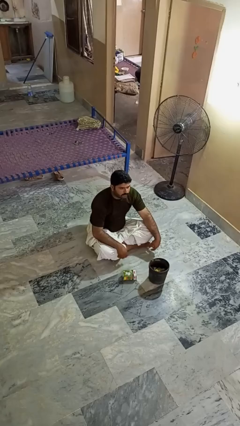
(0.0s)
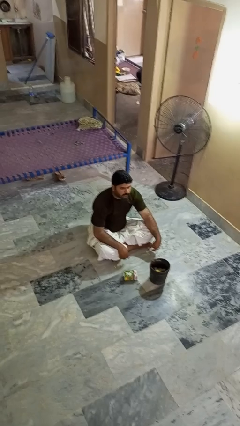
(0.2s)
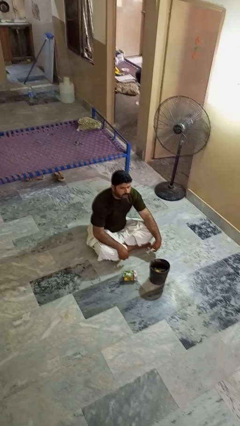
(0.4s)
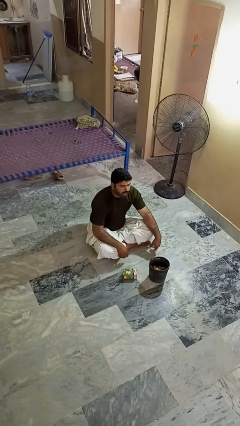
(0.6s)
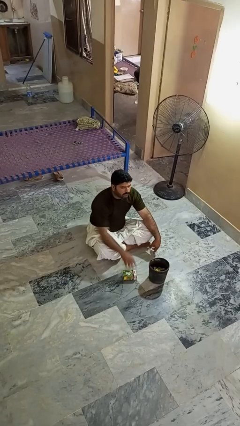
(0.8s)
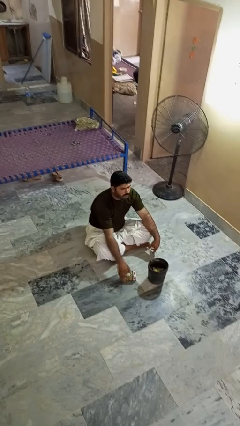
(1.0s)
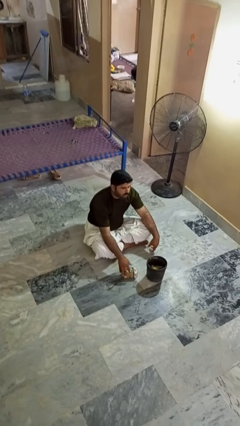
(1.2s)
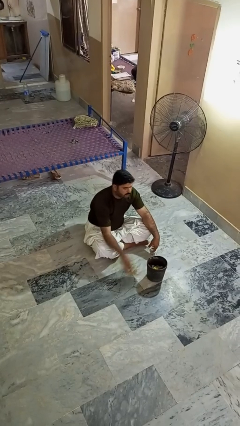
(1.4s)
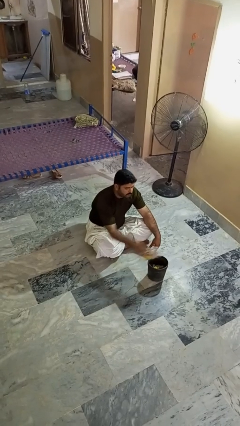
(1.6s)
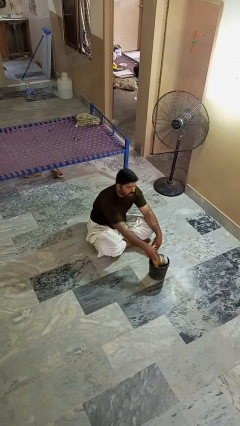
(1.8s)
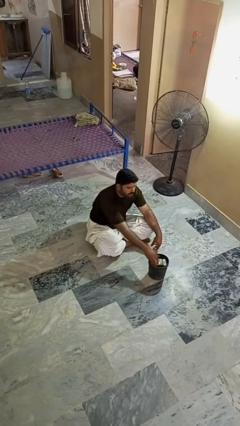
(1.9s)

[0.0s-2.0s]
person puts object into basket

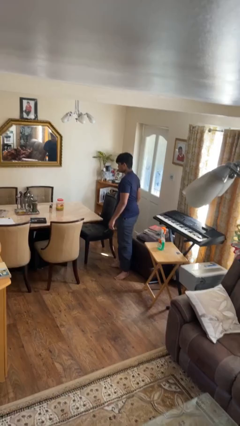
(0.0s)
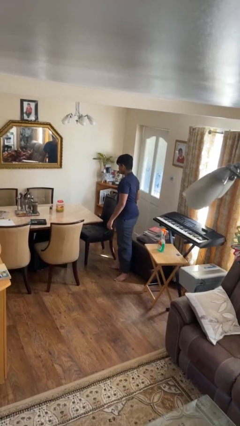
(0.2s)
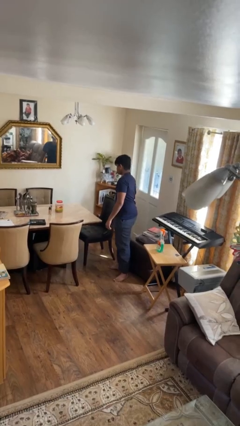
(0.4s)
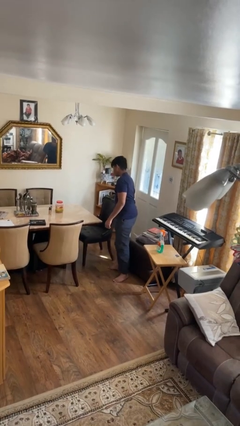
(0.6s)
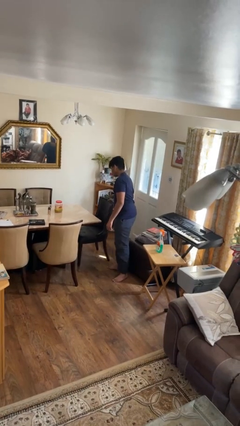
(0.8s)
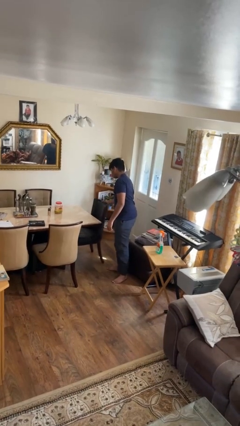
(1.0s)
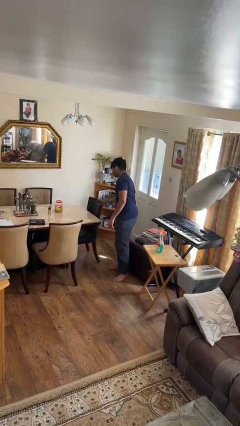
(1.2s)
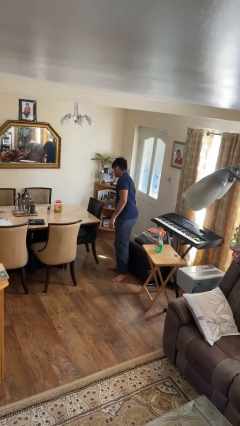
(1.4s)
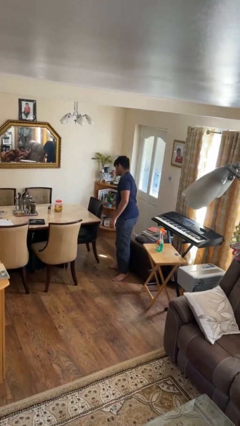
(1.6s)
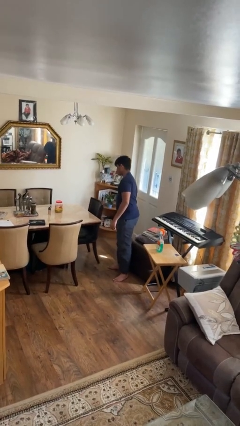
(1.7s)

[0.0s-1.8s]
person pushes in chair

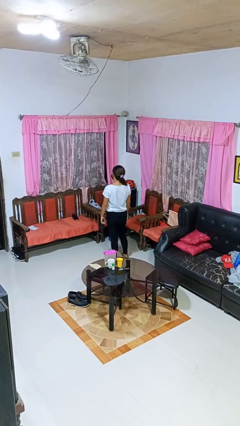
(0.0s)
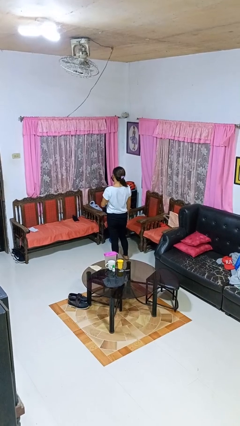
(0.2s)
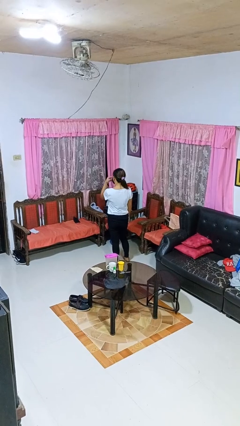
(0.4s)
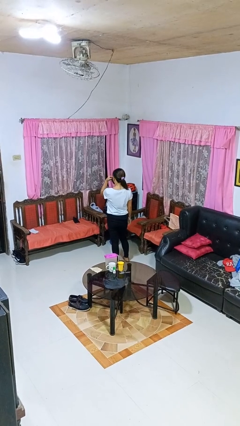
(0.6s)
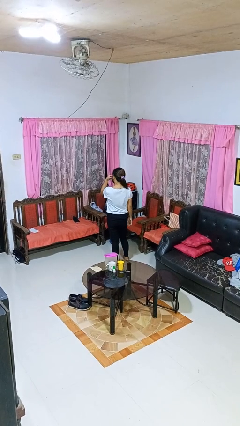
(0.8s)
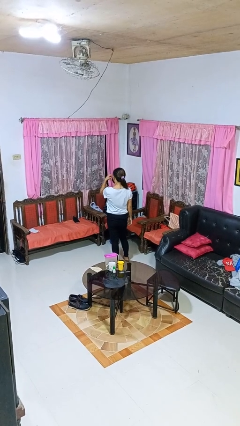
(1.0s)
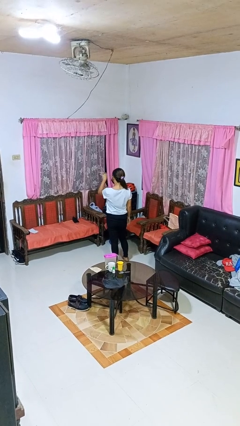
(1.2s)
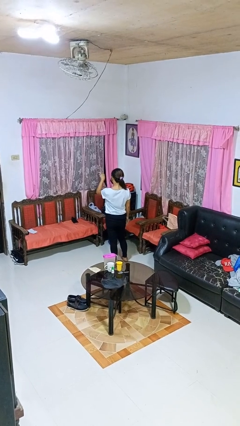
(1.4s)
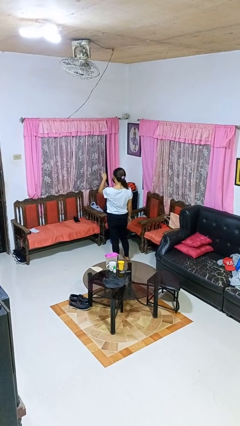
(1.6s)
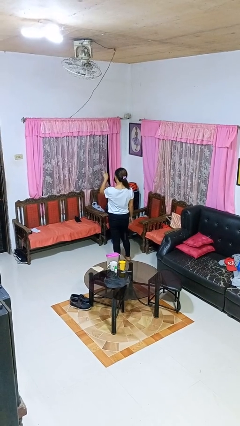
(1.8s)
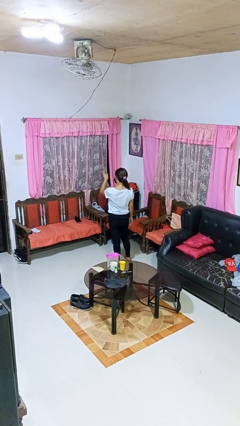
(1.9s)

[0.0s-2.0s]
person gestures watch closely

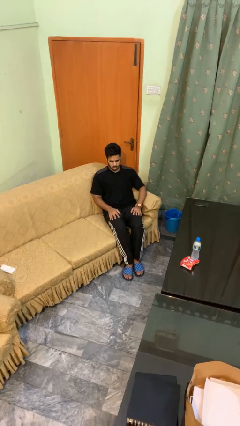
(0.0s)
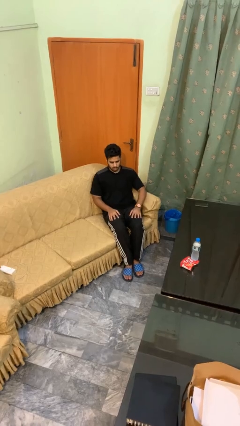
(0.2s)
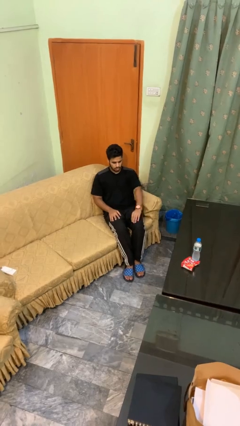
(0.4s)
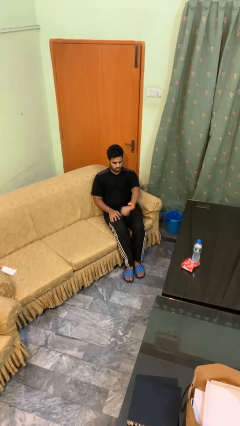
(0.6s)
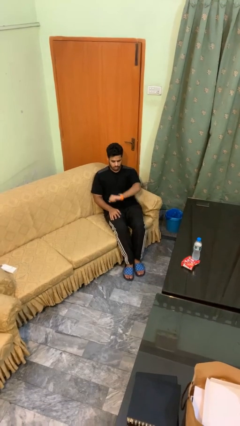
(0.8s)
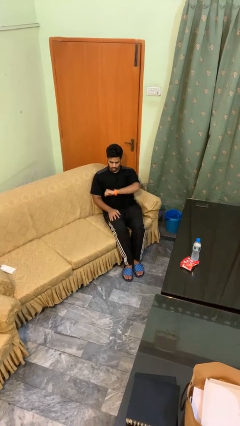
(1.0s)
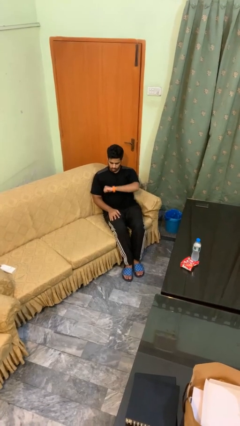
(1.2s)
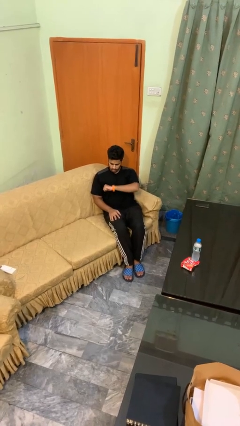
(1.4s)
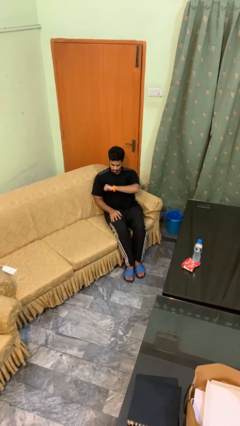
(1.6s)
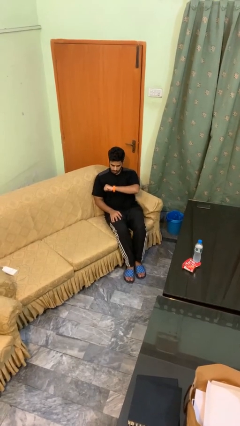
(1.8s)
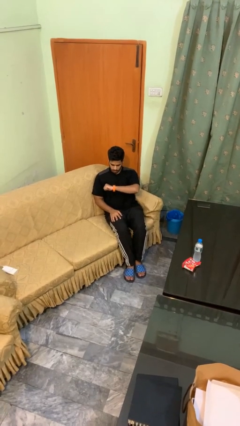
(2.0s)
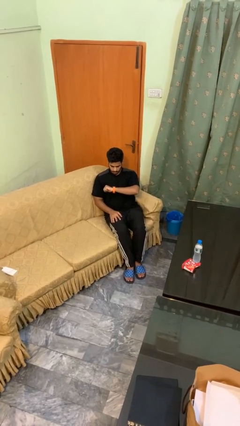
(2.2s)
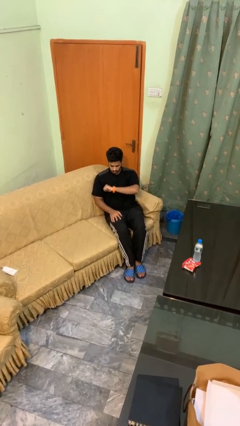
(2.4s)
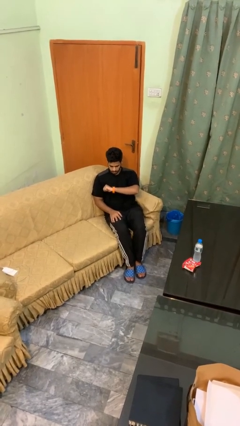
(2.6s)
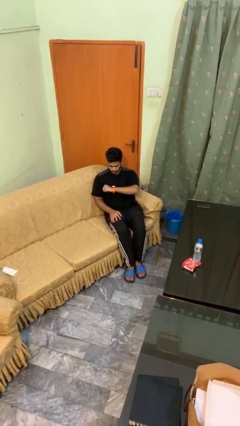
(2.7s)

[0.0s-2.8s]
person looks at wristwatch

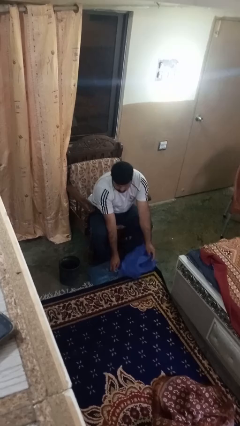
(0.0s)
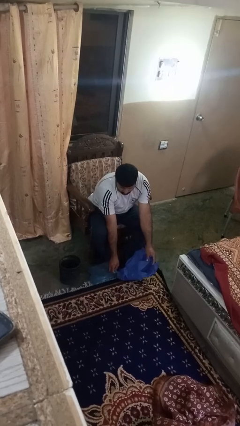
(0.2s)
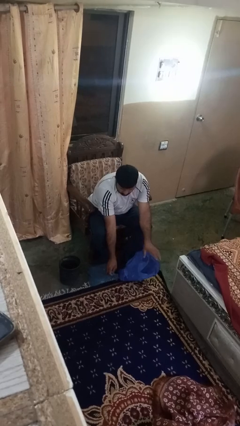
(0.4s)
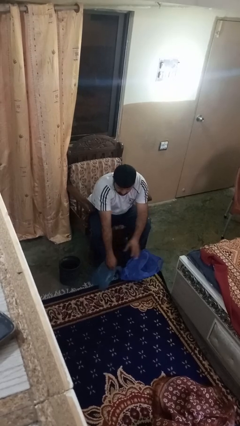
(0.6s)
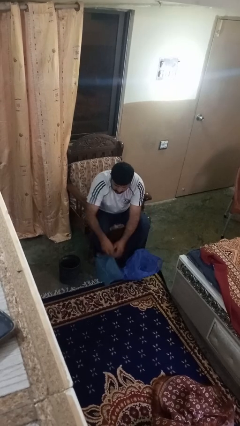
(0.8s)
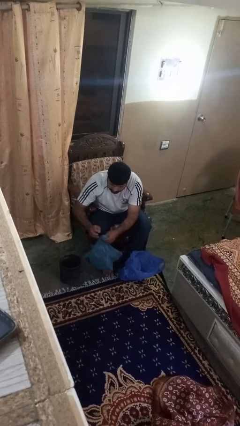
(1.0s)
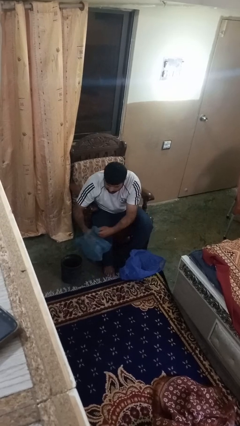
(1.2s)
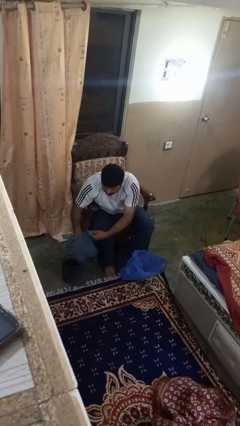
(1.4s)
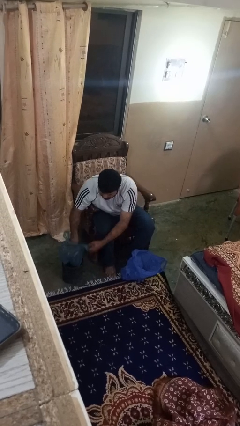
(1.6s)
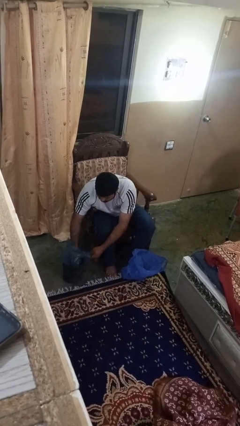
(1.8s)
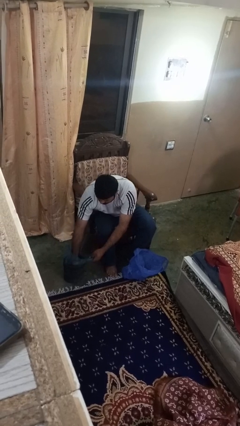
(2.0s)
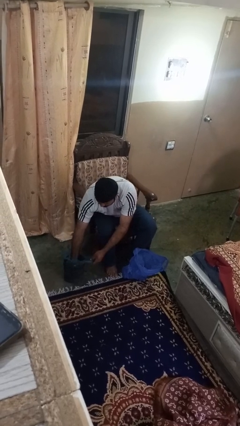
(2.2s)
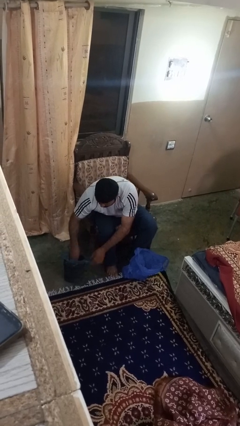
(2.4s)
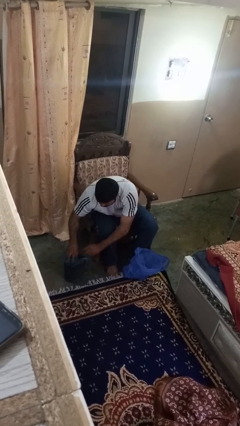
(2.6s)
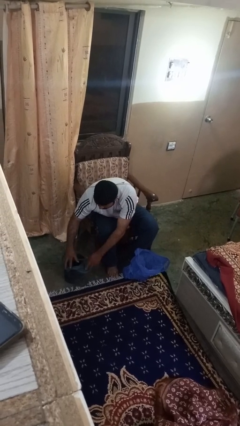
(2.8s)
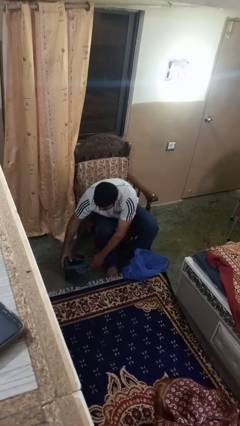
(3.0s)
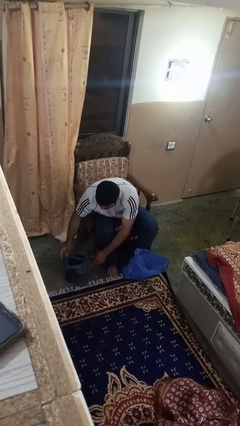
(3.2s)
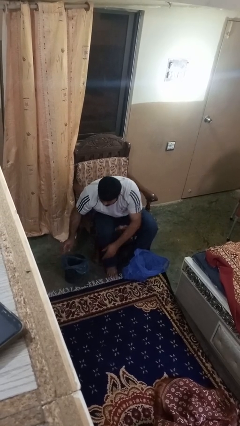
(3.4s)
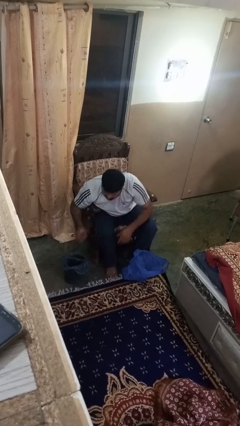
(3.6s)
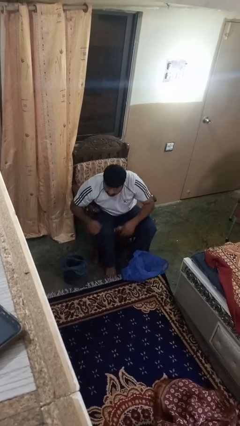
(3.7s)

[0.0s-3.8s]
person inserts trashbag into trashcan

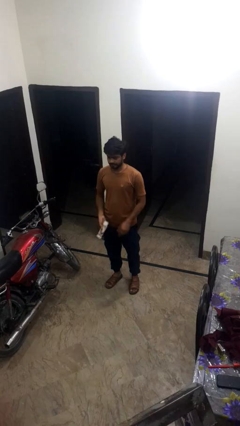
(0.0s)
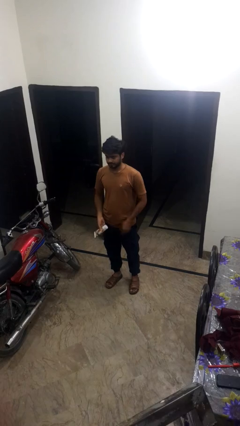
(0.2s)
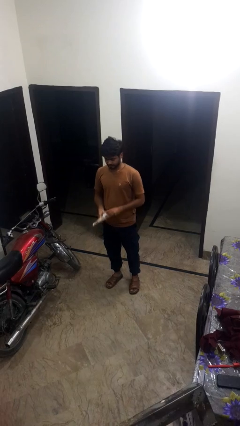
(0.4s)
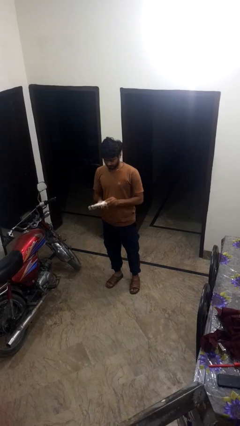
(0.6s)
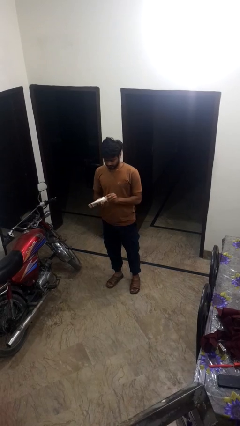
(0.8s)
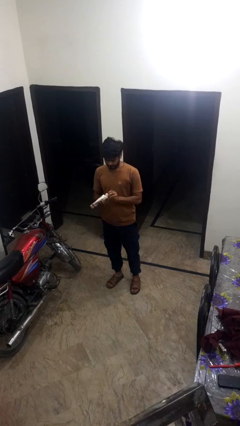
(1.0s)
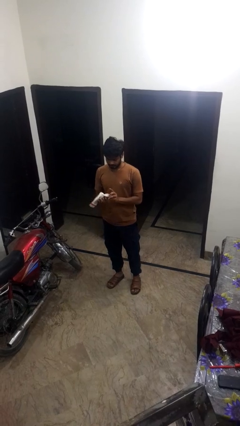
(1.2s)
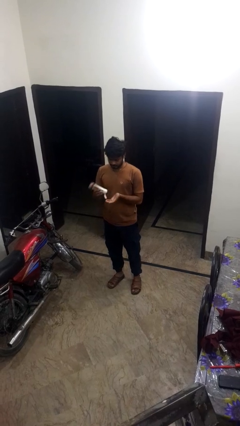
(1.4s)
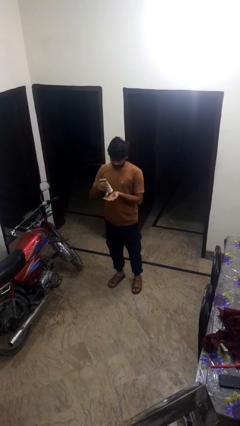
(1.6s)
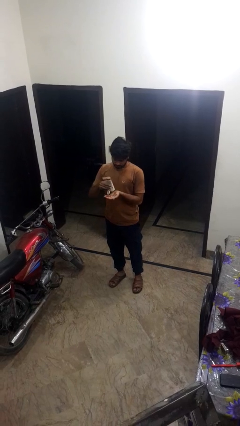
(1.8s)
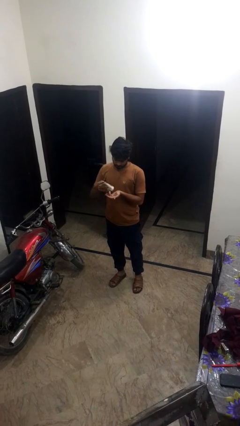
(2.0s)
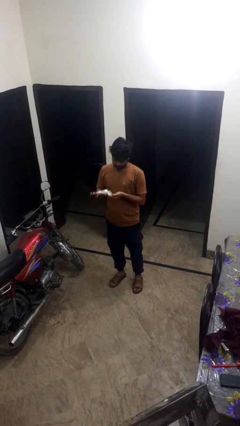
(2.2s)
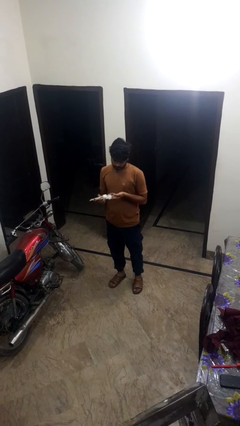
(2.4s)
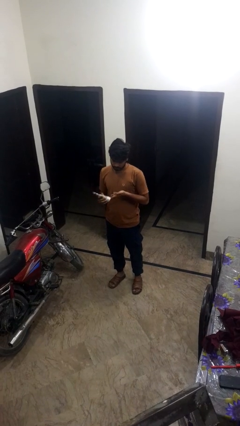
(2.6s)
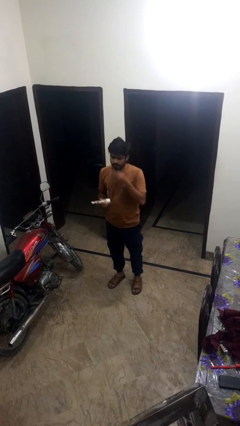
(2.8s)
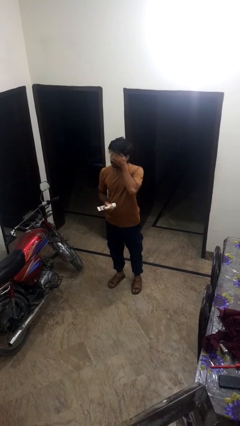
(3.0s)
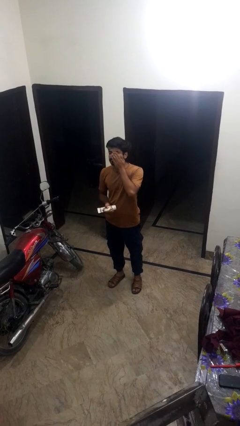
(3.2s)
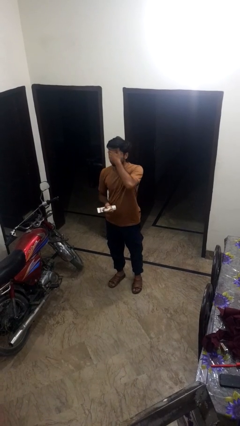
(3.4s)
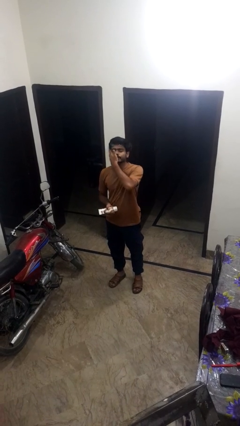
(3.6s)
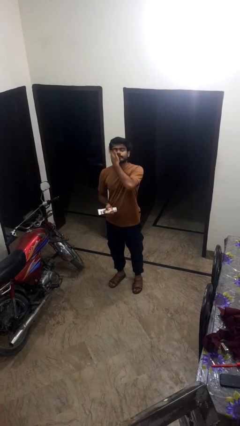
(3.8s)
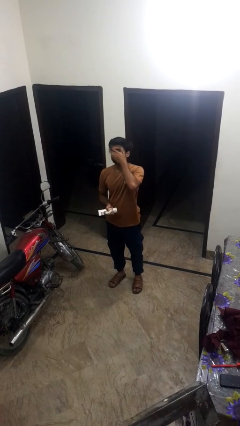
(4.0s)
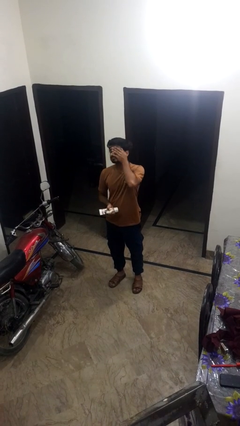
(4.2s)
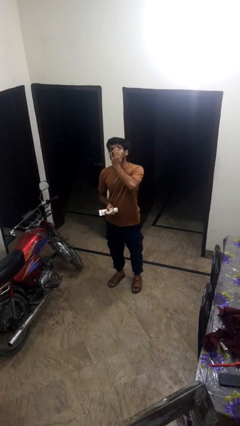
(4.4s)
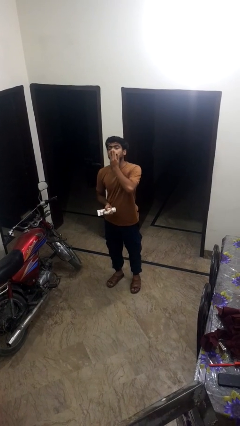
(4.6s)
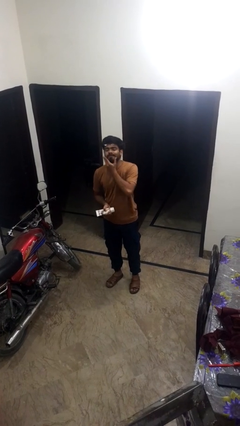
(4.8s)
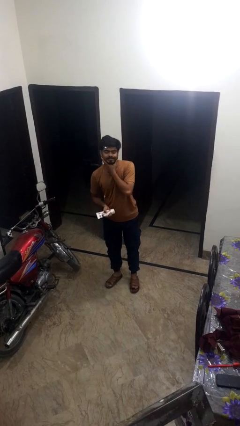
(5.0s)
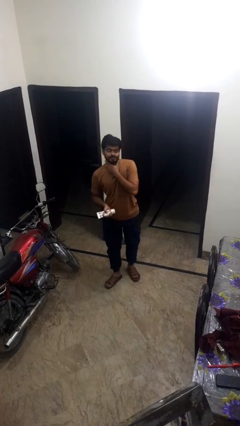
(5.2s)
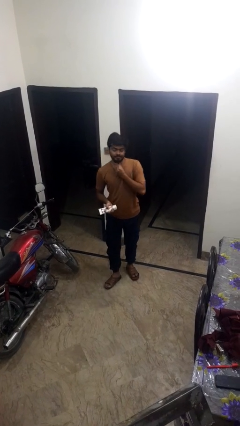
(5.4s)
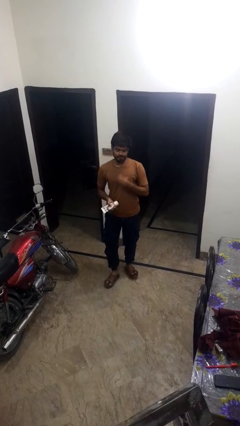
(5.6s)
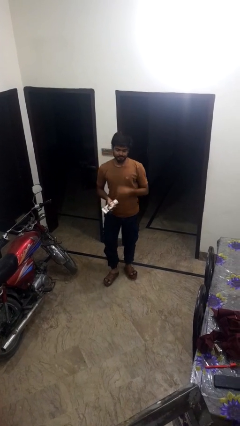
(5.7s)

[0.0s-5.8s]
person applies sunscreen
